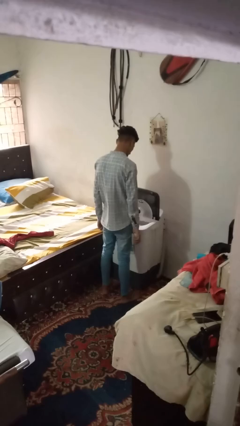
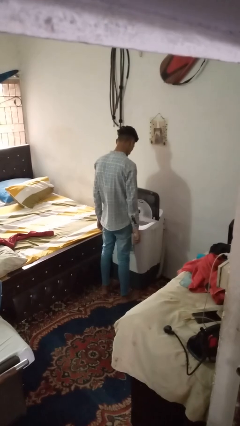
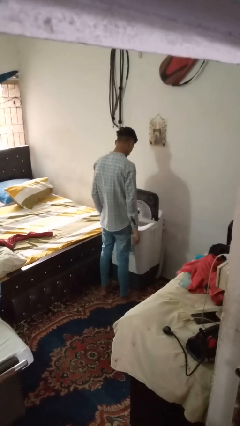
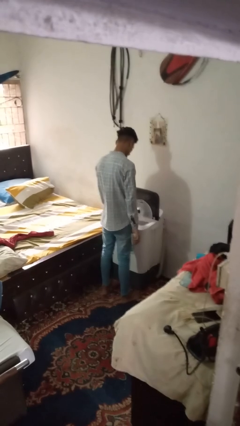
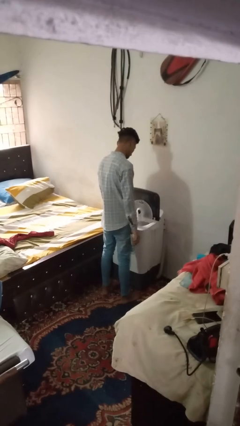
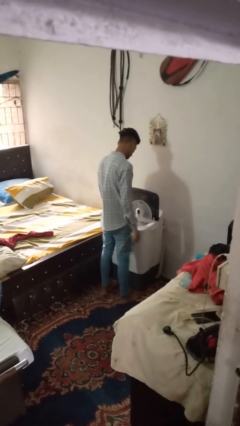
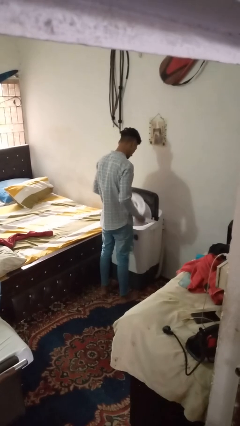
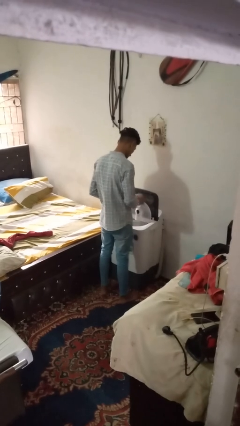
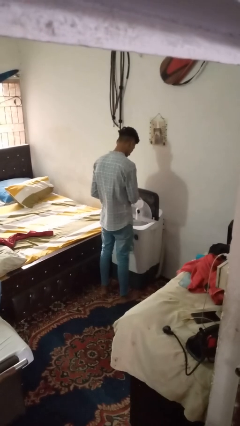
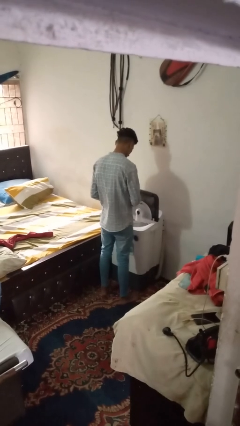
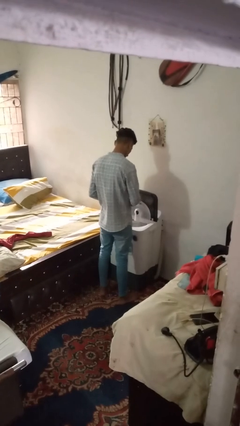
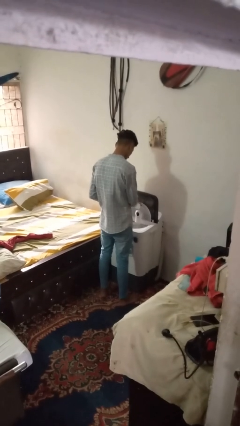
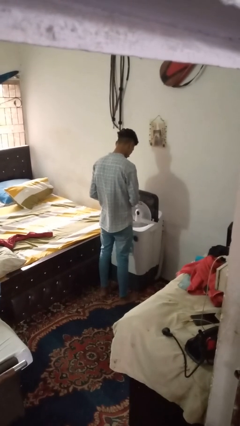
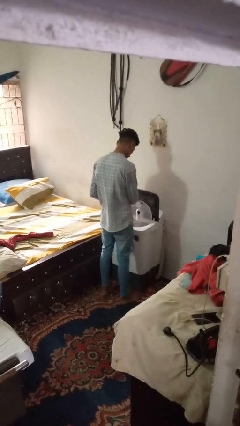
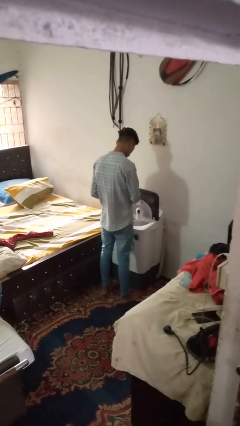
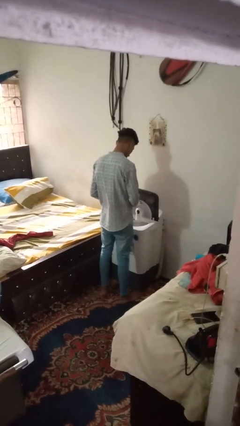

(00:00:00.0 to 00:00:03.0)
person cleans dryer lint trap

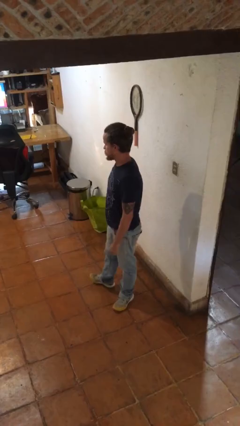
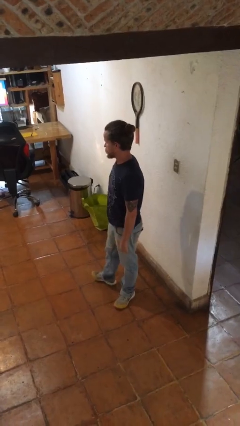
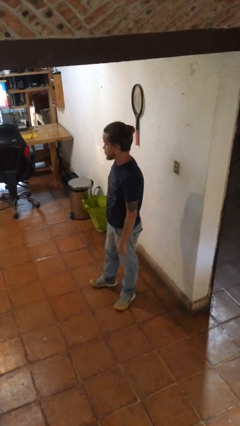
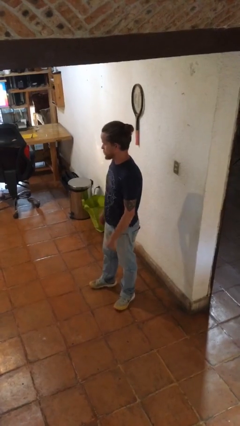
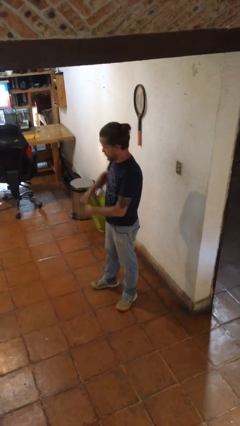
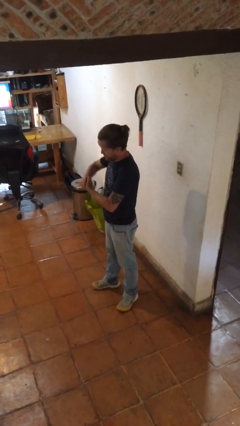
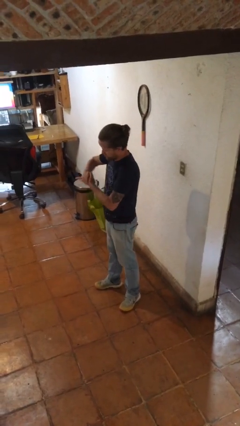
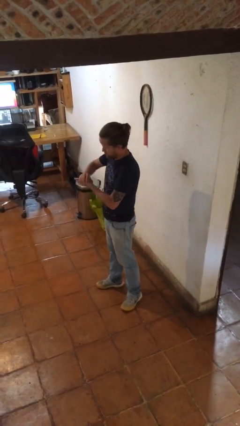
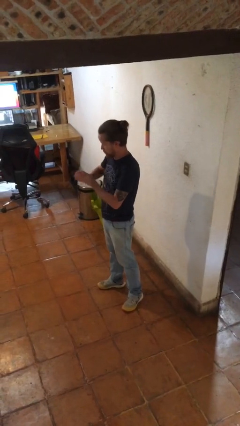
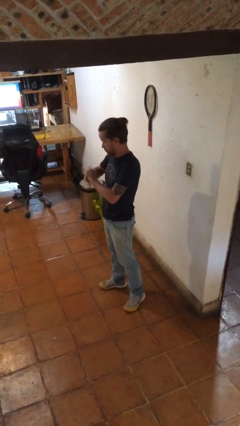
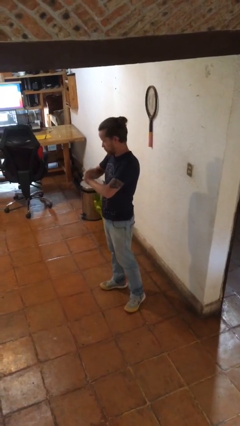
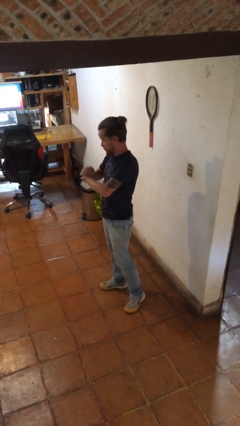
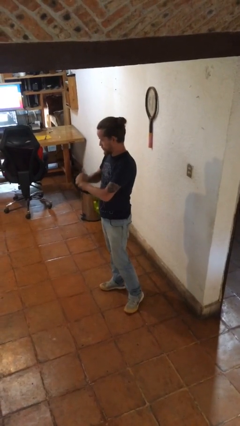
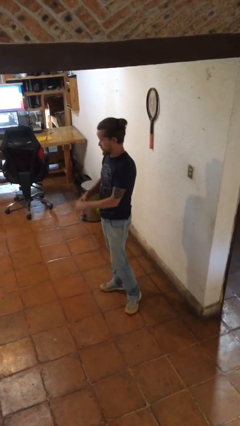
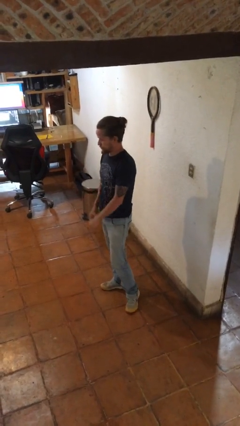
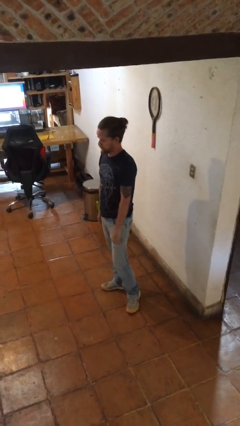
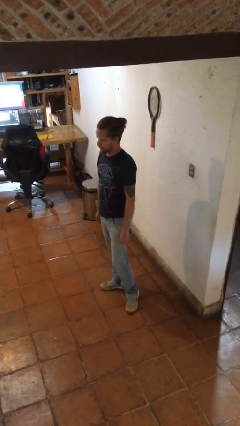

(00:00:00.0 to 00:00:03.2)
person cracks knuckles

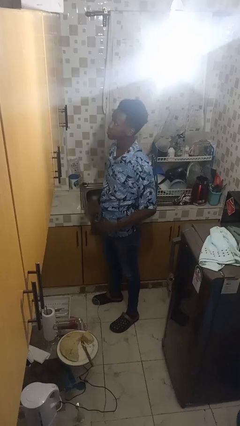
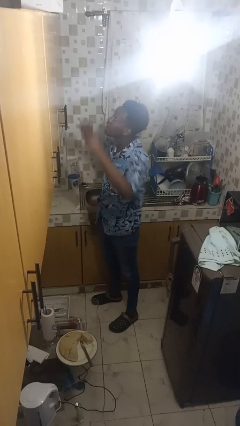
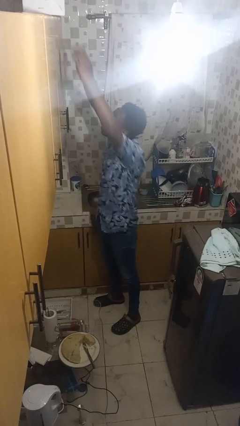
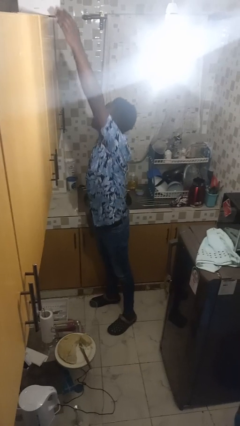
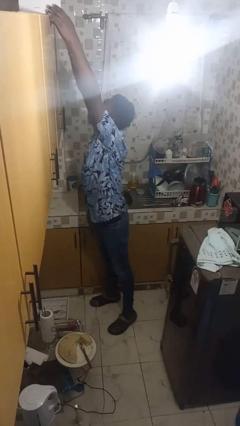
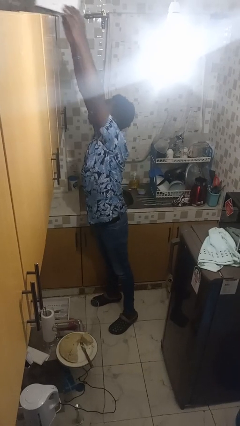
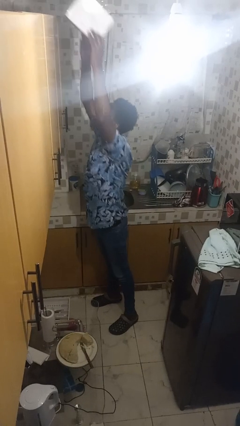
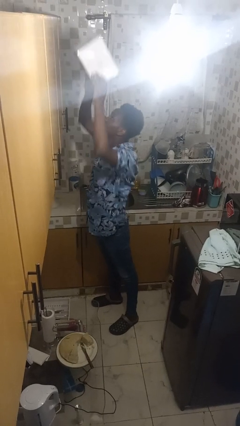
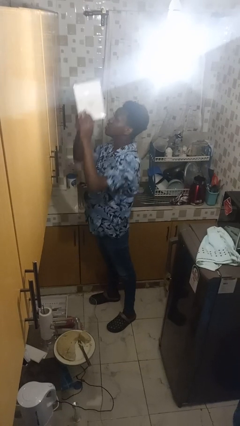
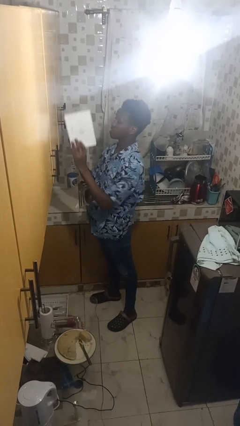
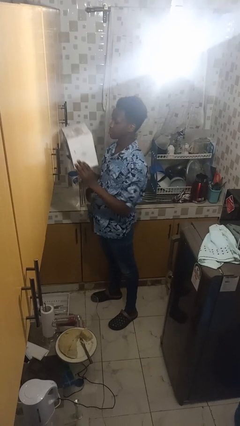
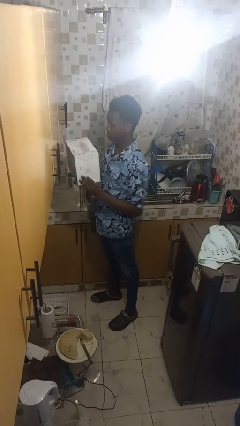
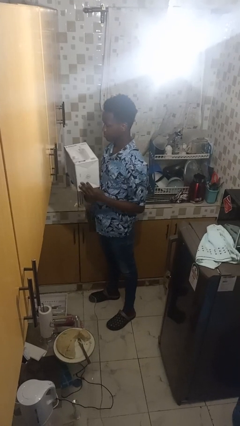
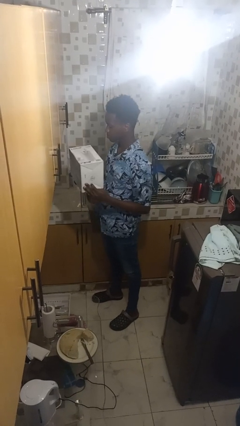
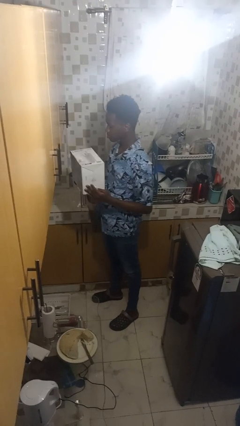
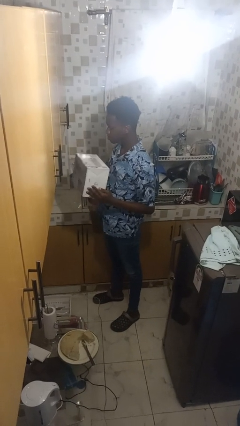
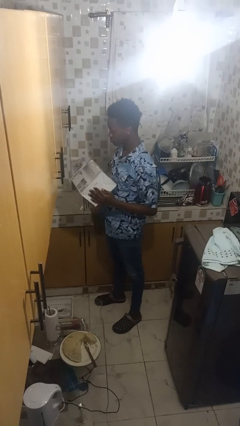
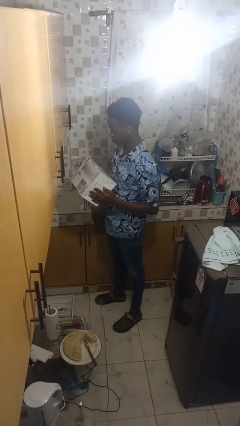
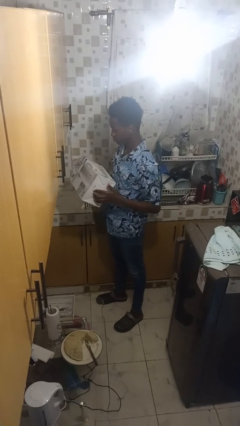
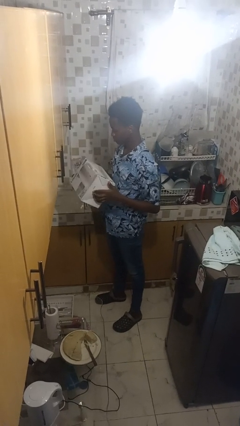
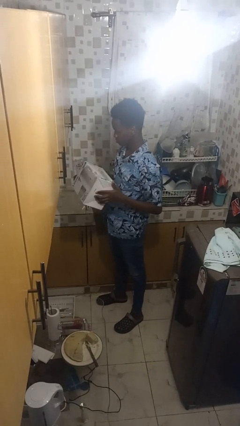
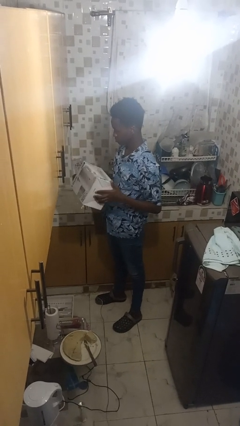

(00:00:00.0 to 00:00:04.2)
person picks up object from shelf

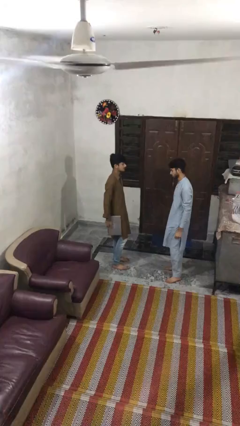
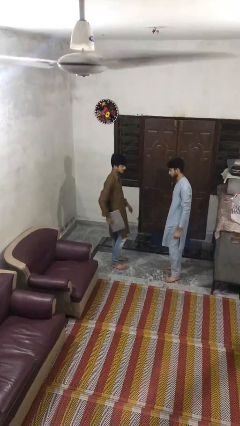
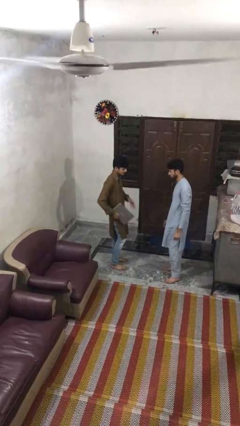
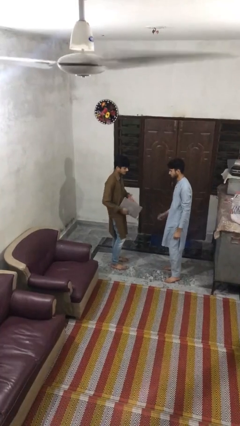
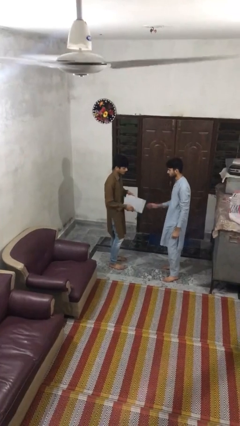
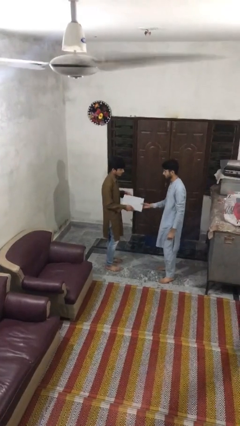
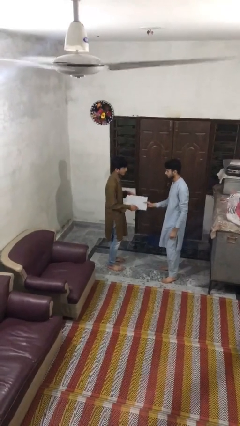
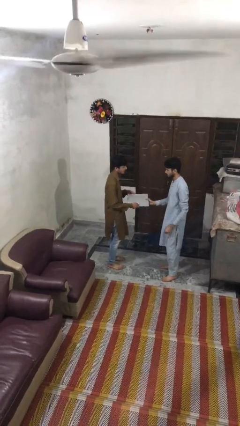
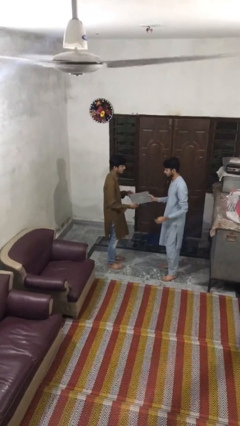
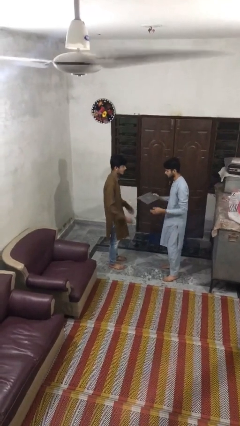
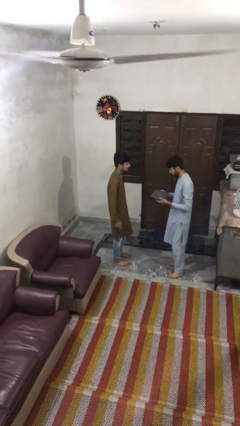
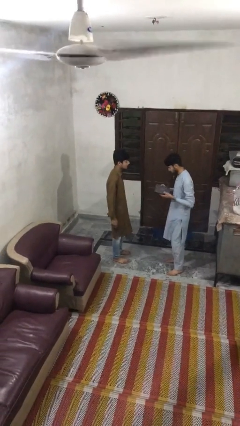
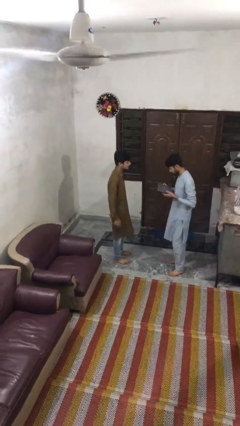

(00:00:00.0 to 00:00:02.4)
person transfers object to person

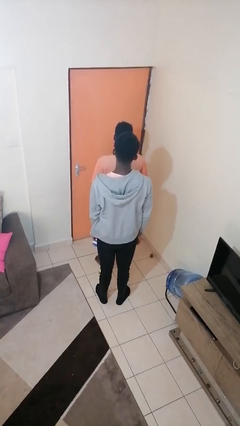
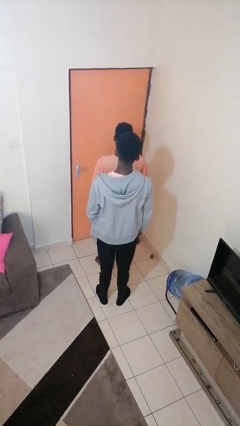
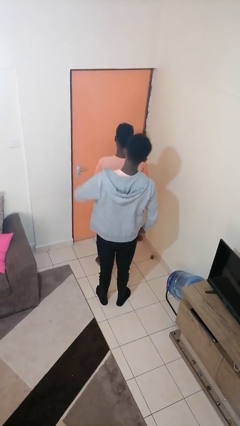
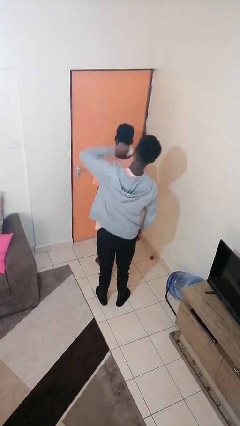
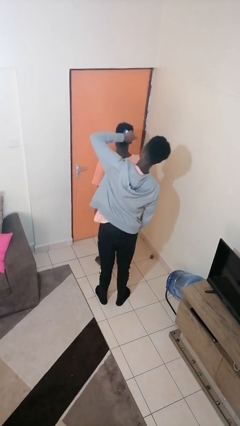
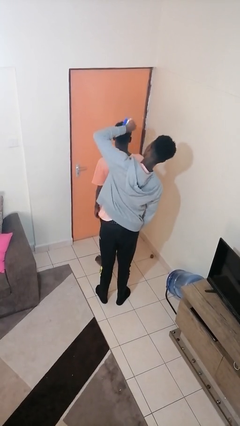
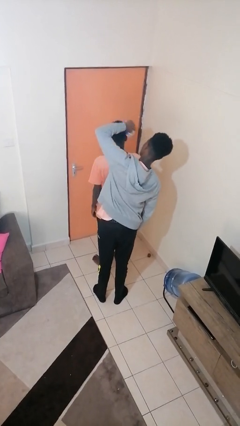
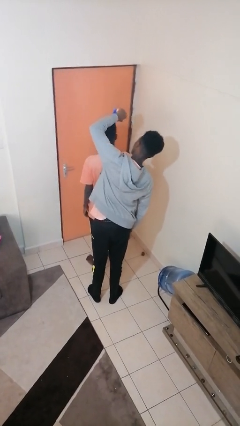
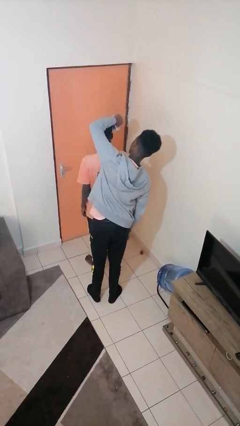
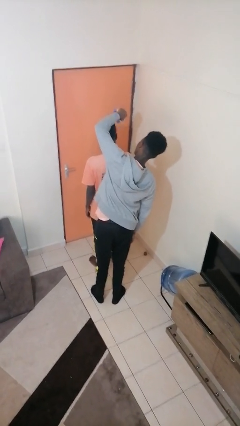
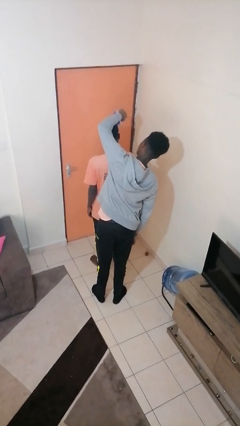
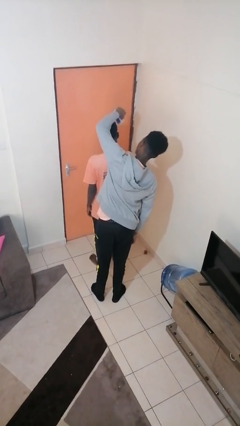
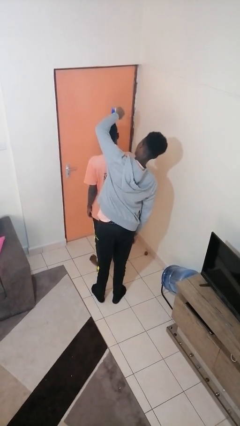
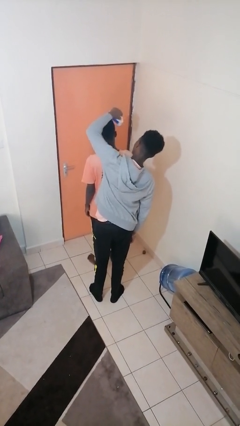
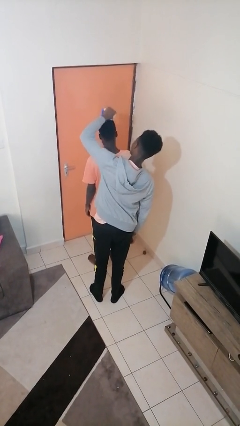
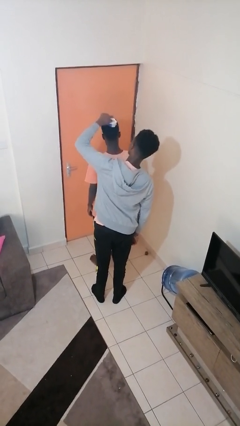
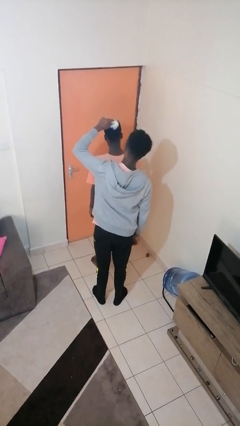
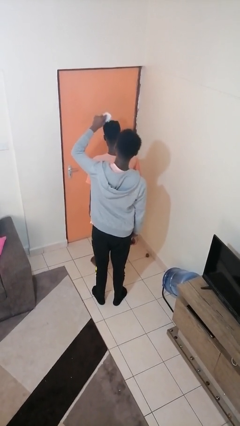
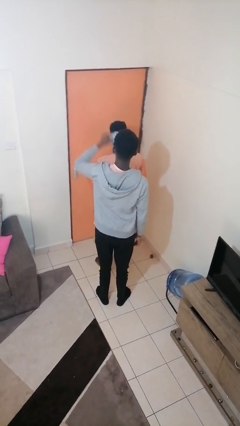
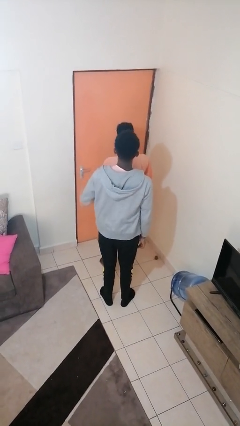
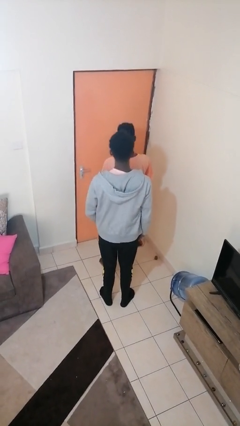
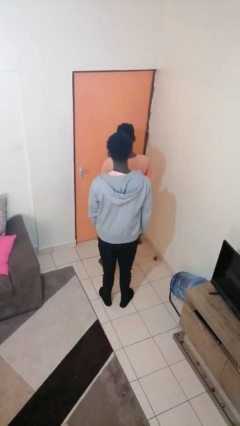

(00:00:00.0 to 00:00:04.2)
person brushes hair of person

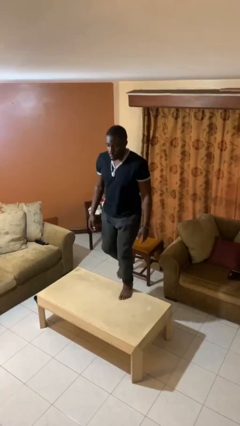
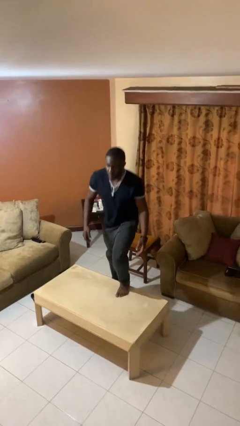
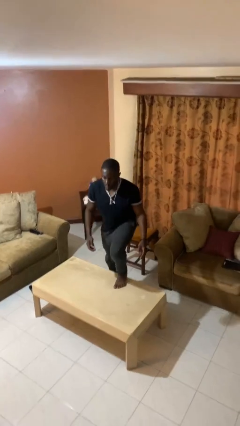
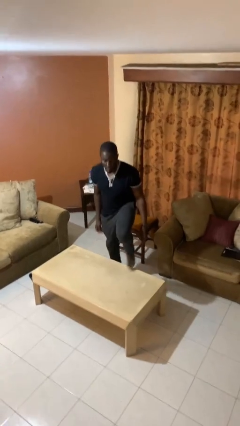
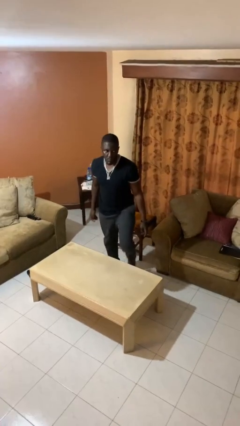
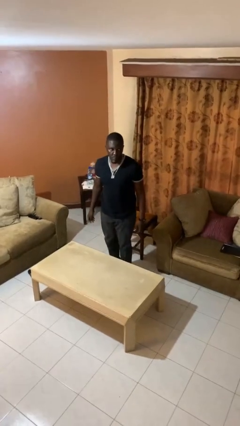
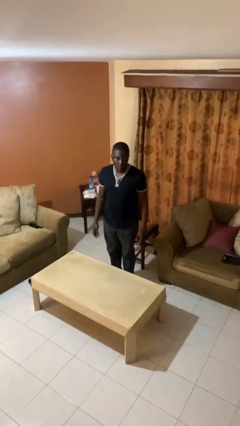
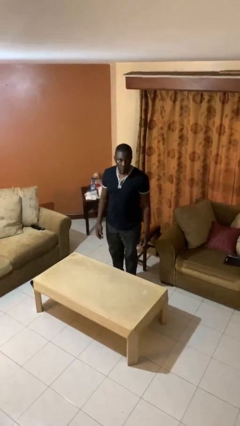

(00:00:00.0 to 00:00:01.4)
person climbs off table
